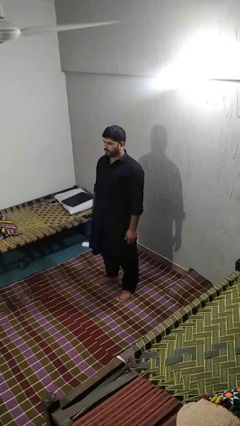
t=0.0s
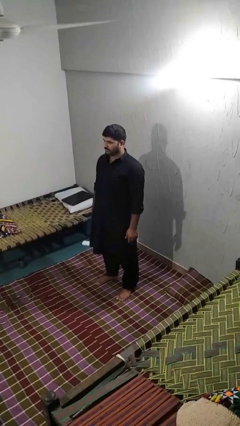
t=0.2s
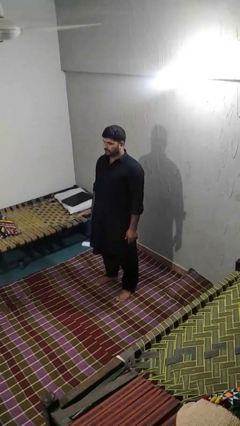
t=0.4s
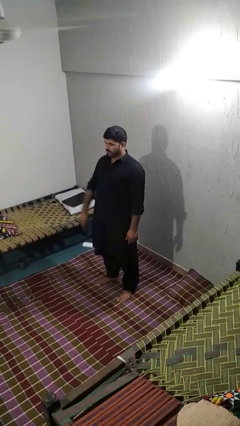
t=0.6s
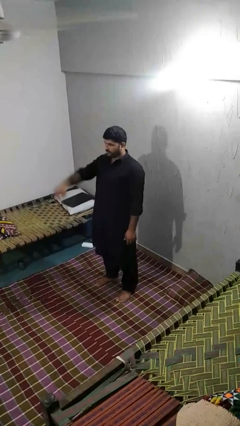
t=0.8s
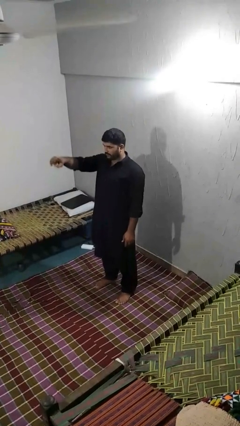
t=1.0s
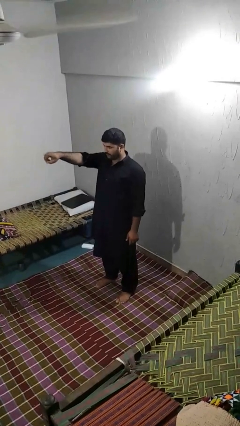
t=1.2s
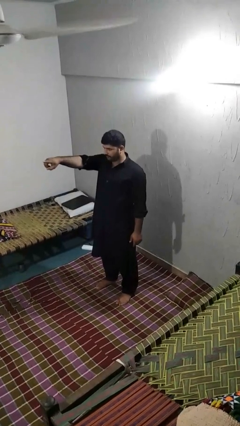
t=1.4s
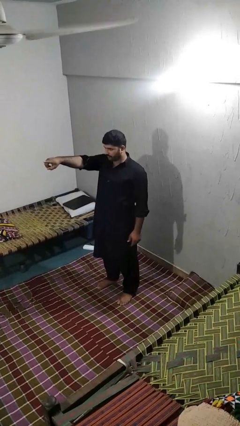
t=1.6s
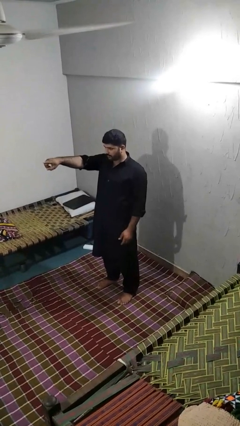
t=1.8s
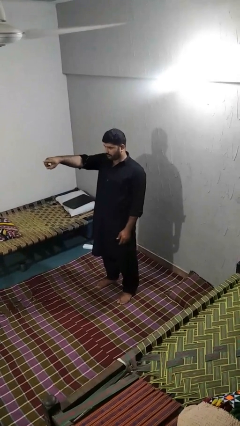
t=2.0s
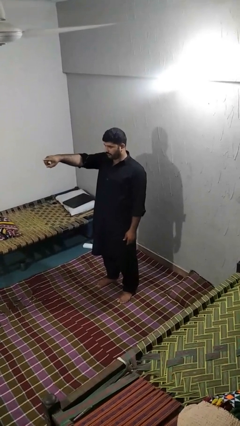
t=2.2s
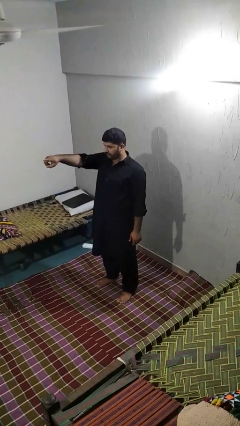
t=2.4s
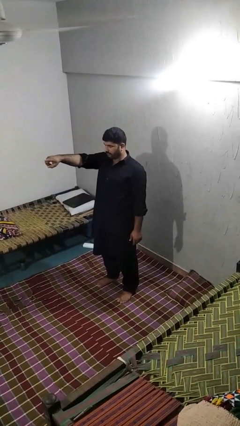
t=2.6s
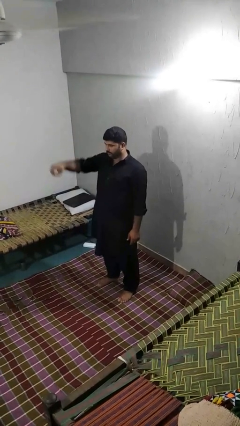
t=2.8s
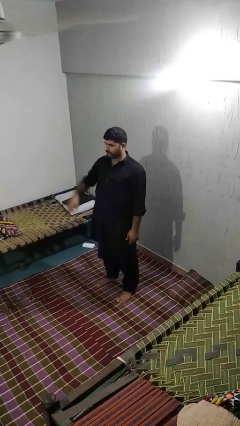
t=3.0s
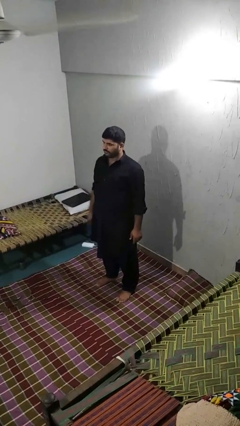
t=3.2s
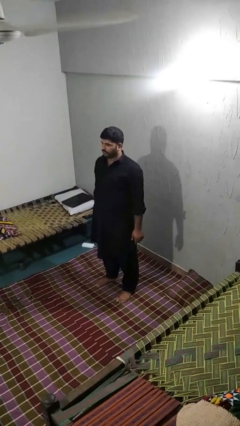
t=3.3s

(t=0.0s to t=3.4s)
person points at person

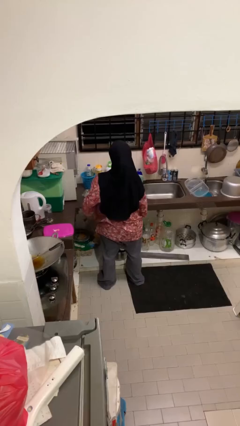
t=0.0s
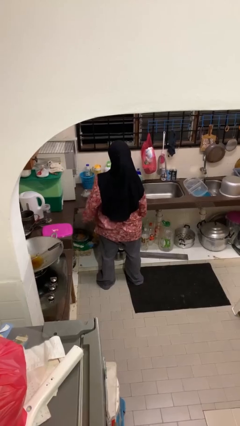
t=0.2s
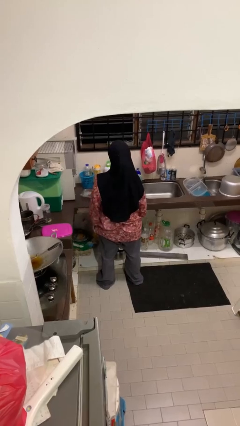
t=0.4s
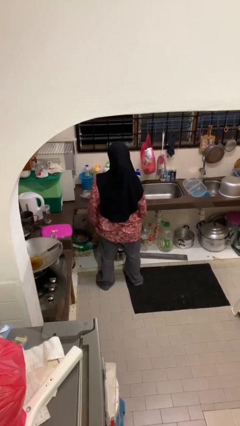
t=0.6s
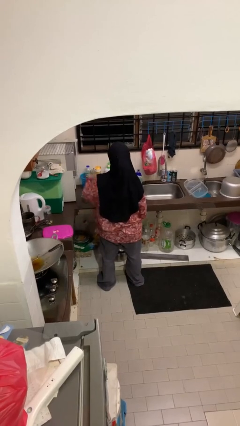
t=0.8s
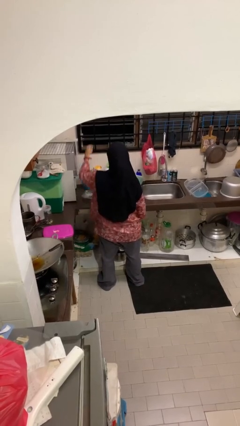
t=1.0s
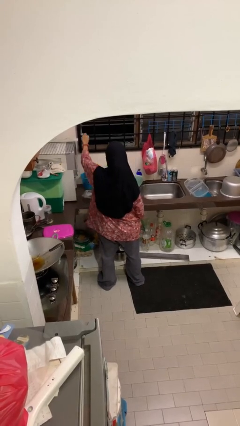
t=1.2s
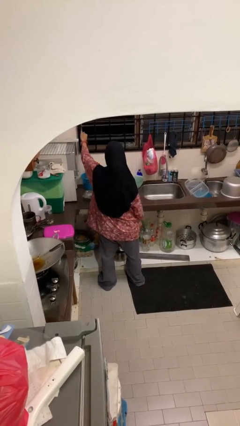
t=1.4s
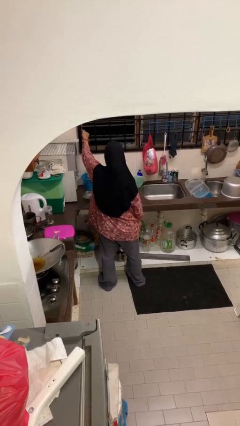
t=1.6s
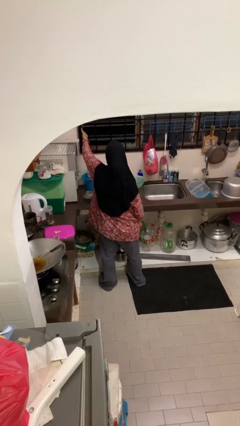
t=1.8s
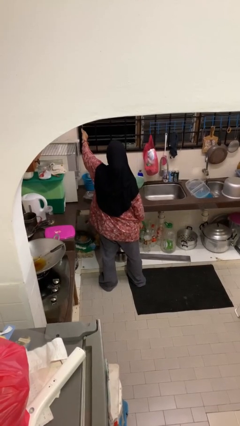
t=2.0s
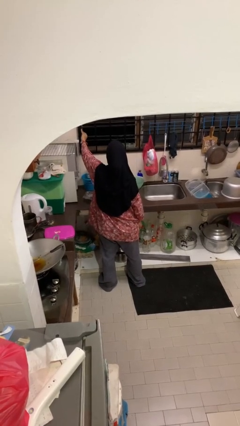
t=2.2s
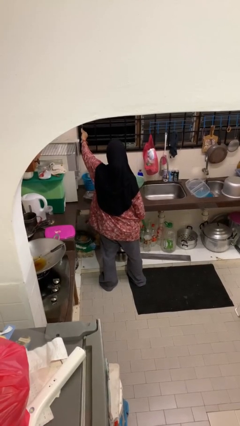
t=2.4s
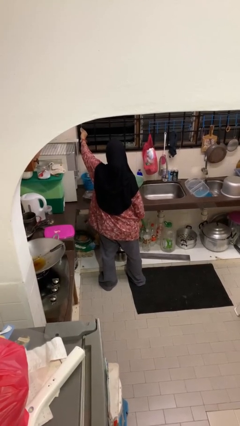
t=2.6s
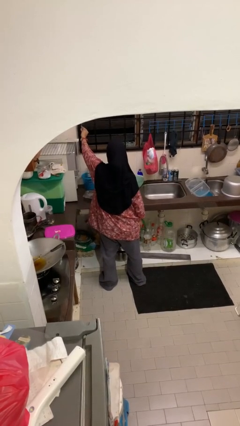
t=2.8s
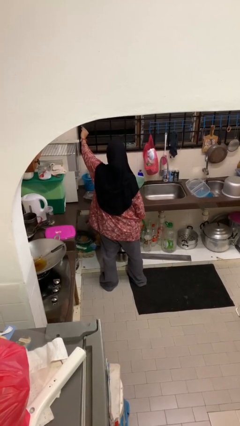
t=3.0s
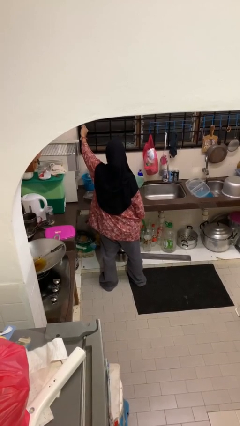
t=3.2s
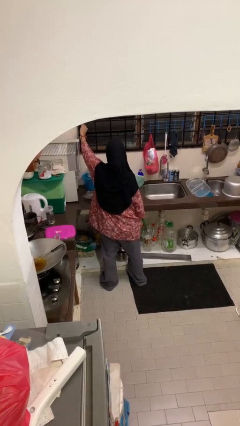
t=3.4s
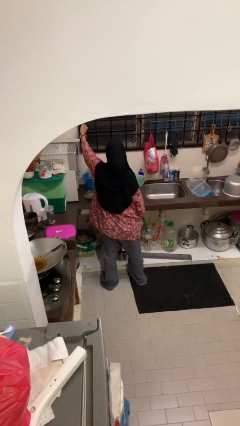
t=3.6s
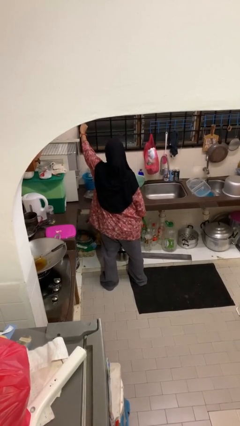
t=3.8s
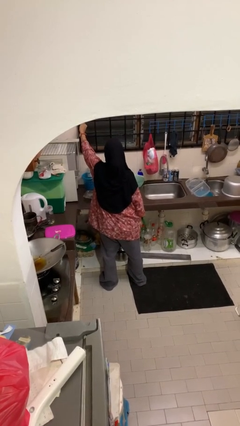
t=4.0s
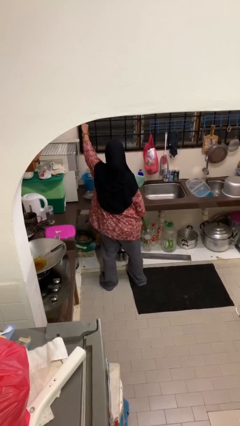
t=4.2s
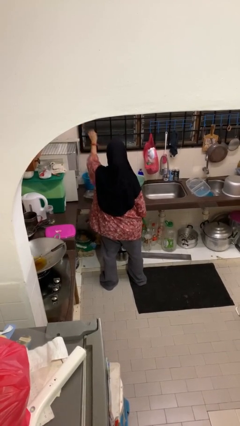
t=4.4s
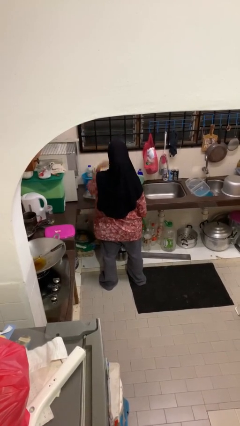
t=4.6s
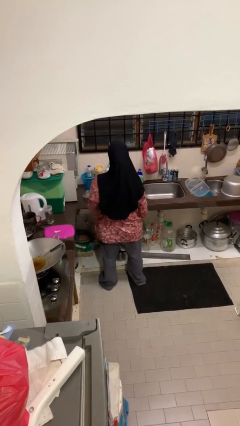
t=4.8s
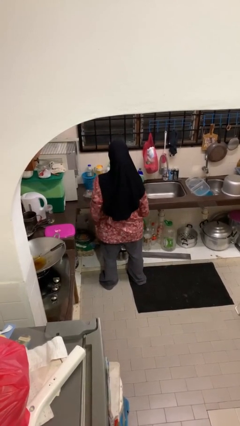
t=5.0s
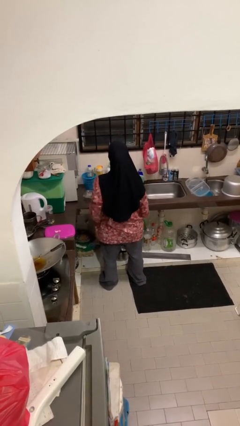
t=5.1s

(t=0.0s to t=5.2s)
person closes home window

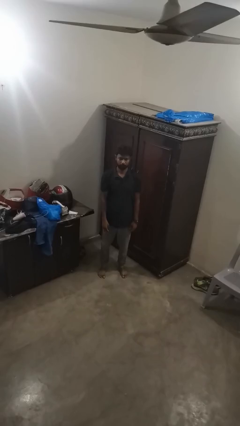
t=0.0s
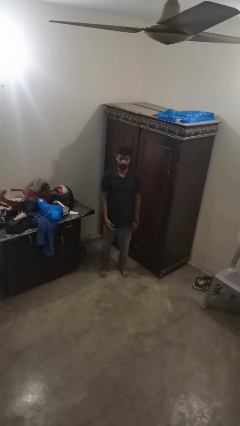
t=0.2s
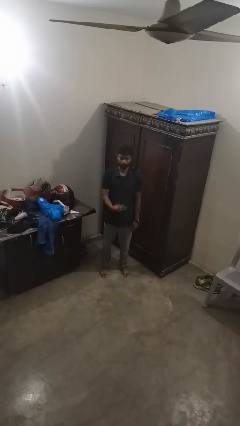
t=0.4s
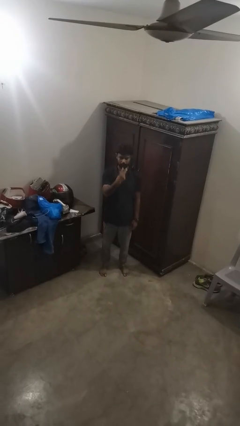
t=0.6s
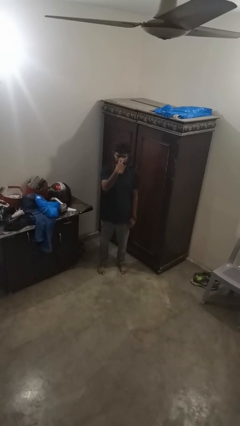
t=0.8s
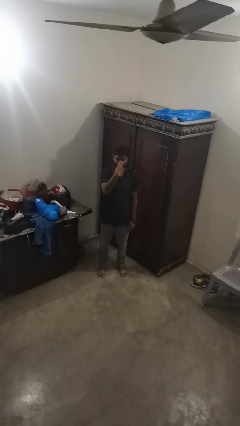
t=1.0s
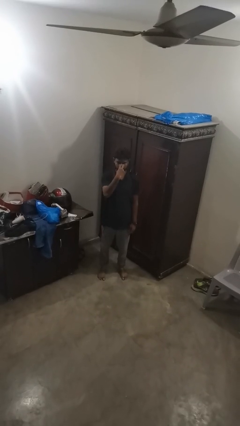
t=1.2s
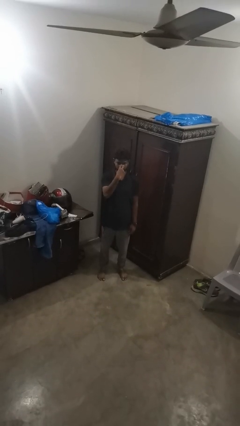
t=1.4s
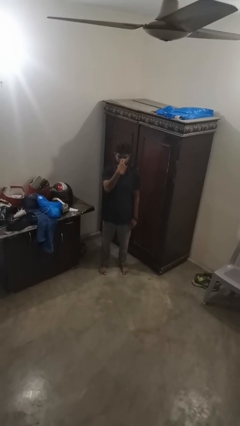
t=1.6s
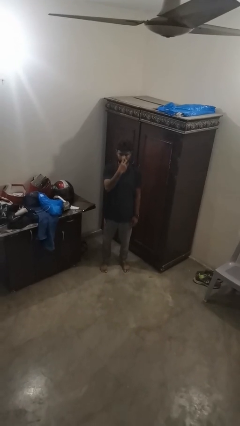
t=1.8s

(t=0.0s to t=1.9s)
person gestures watch closely

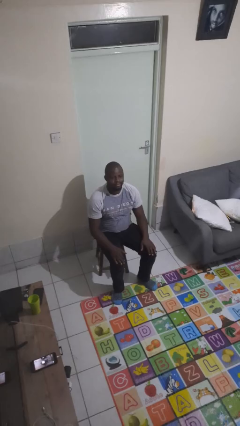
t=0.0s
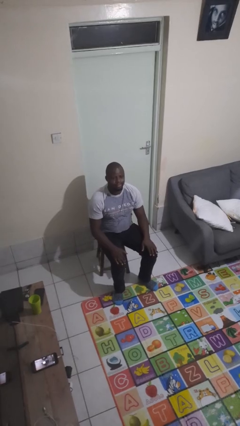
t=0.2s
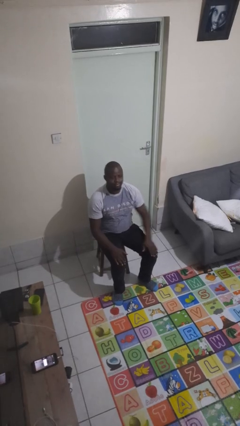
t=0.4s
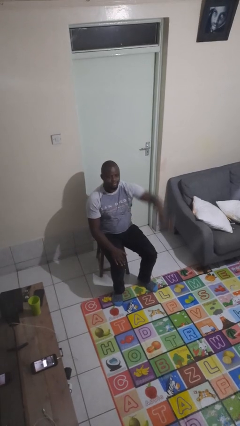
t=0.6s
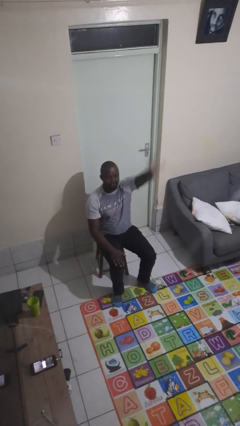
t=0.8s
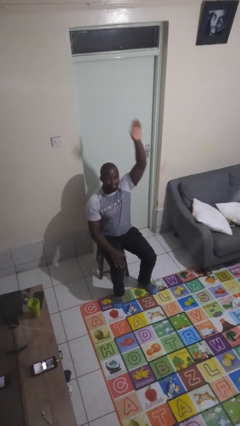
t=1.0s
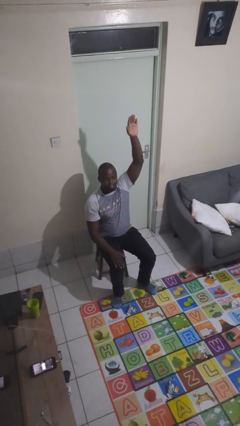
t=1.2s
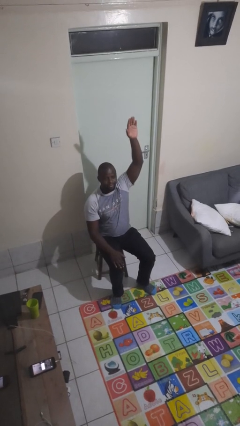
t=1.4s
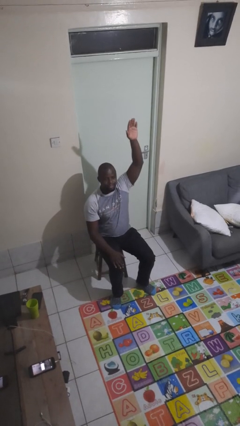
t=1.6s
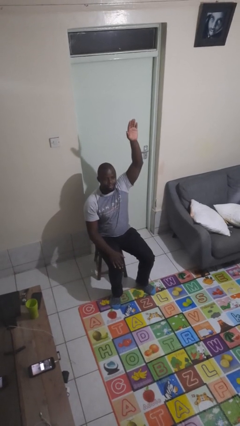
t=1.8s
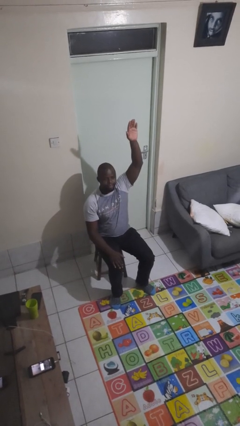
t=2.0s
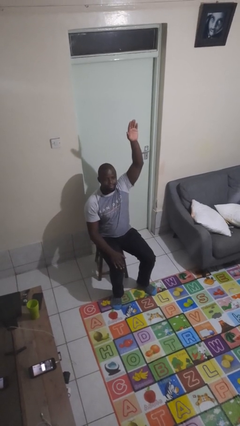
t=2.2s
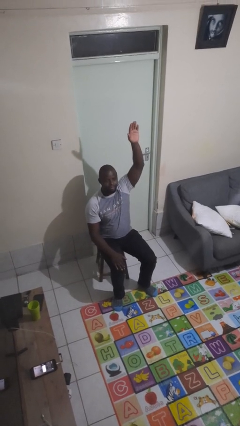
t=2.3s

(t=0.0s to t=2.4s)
person gestures raise hand

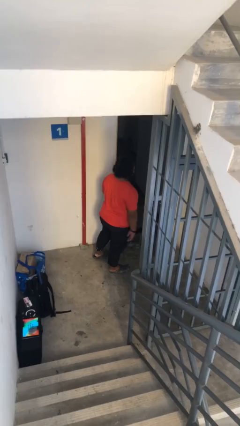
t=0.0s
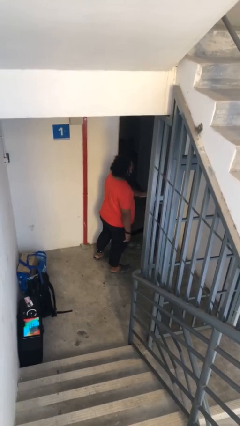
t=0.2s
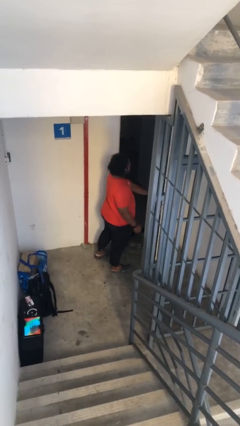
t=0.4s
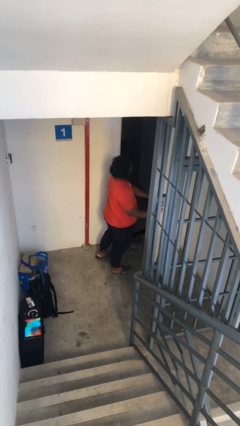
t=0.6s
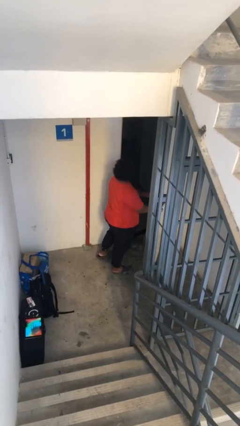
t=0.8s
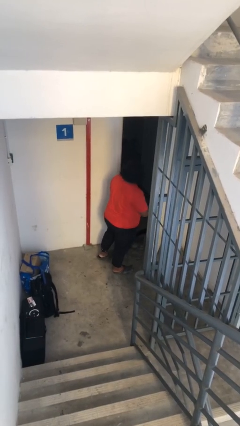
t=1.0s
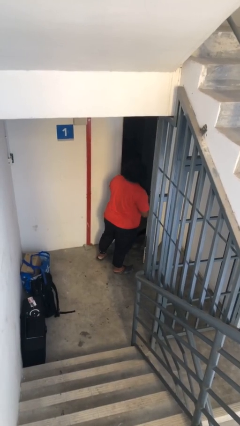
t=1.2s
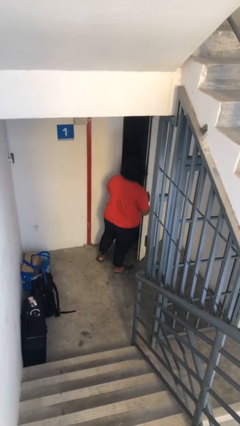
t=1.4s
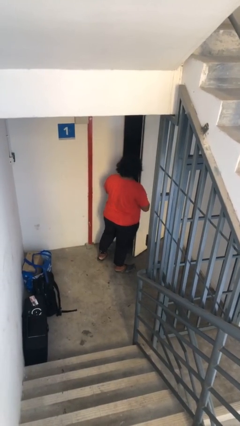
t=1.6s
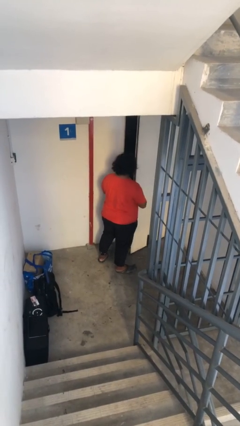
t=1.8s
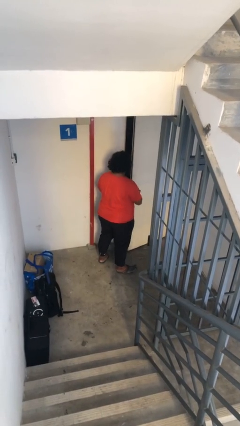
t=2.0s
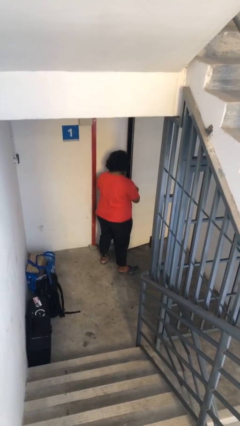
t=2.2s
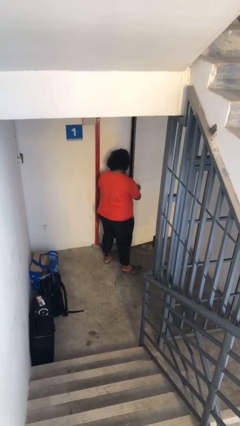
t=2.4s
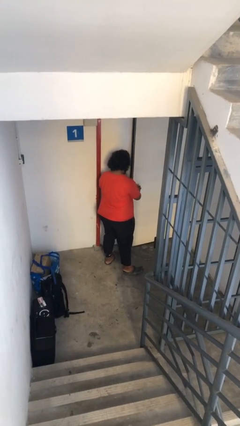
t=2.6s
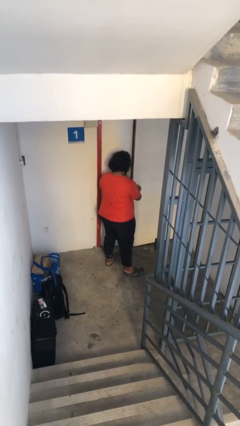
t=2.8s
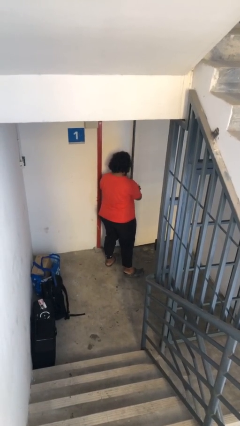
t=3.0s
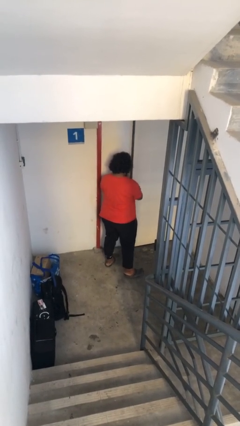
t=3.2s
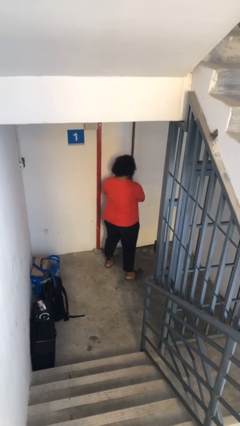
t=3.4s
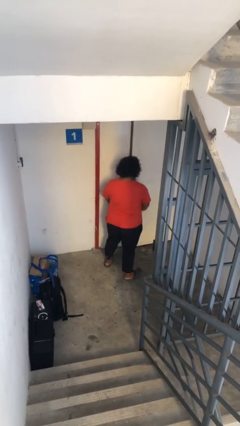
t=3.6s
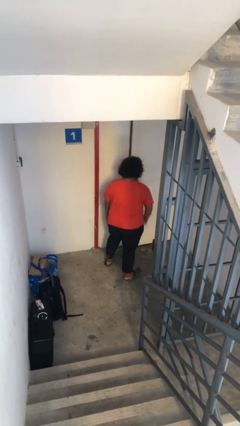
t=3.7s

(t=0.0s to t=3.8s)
person closes facility door

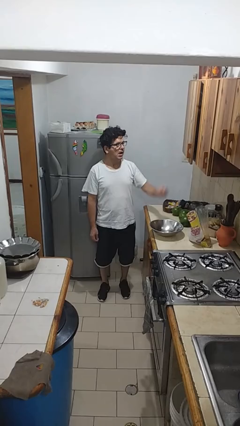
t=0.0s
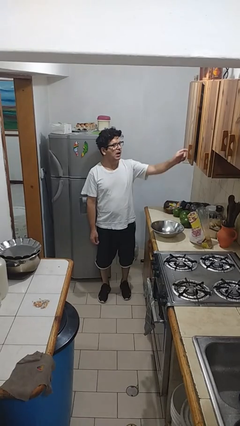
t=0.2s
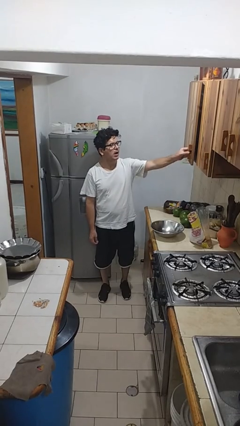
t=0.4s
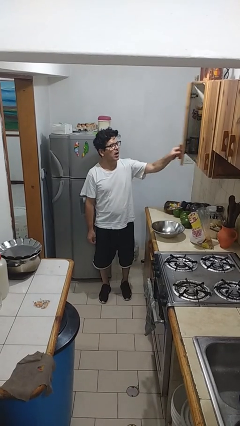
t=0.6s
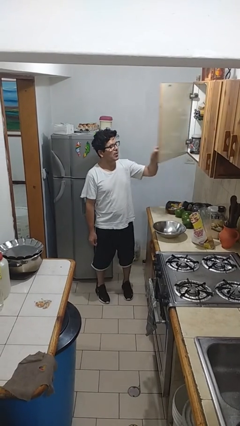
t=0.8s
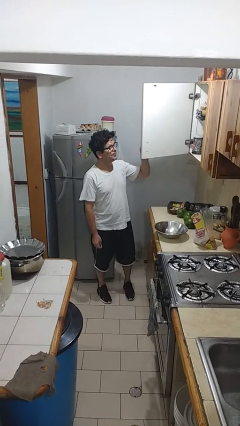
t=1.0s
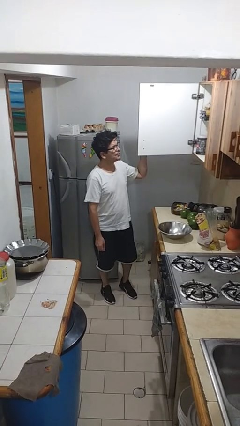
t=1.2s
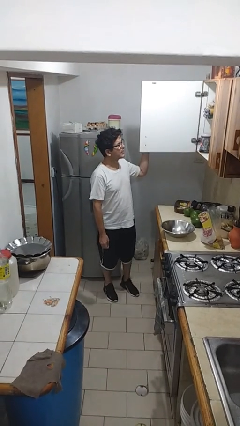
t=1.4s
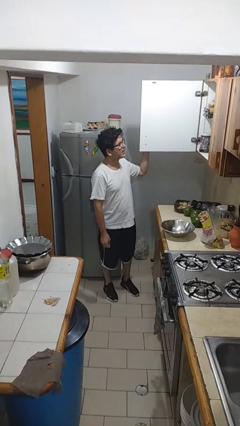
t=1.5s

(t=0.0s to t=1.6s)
person opens kitchen drawer
